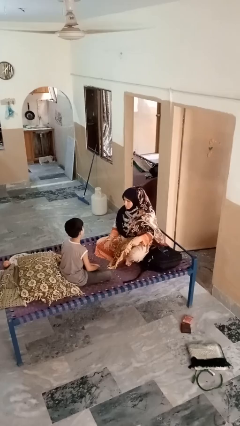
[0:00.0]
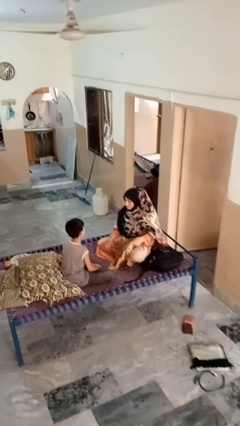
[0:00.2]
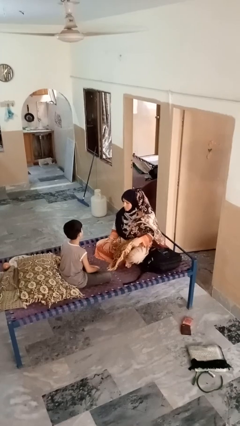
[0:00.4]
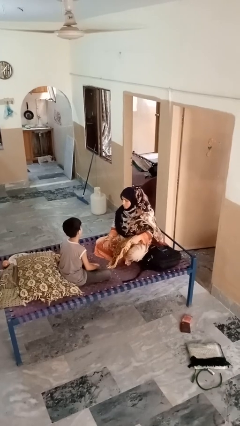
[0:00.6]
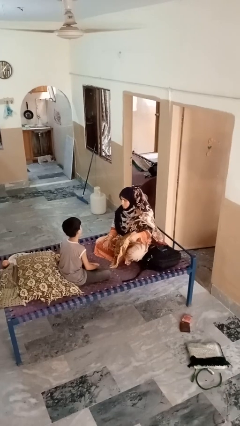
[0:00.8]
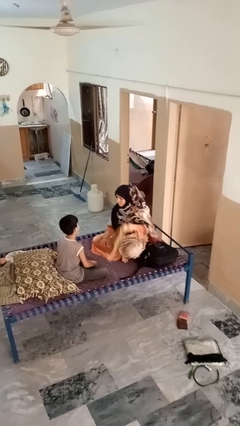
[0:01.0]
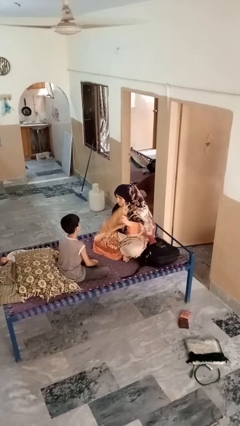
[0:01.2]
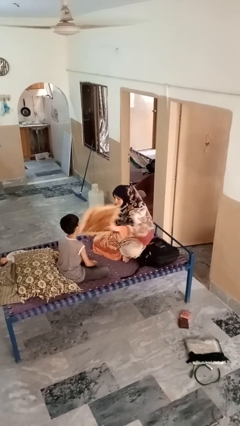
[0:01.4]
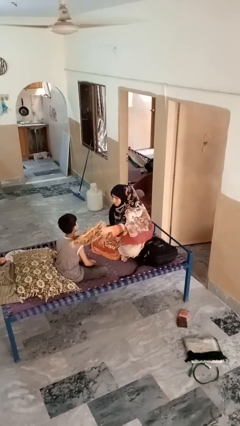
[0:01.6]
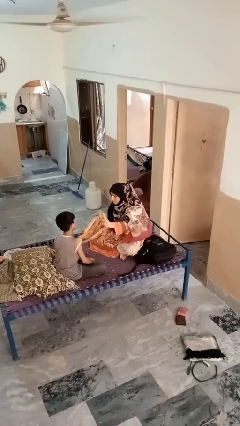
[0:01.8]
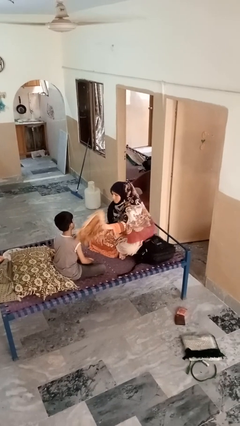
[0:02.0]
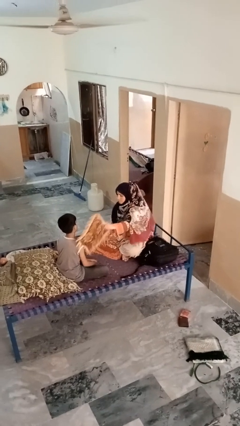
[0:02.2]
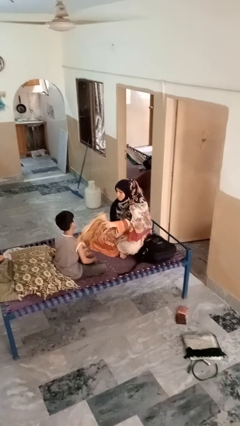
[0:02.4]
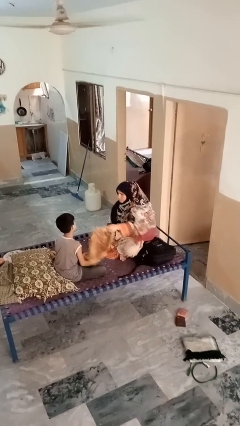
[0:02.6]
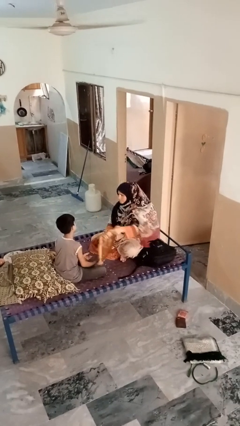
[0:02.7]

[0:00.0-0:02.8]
person hits person with pillow

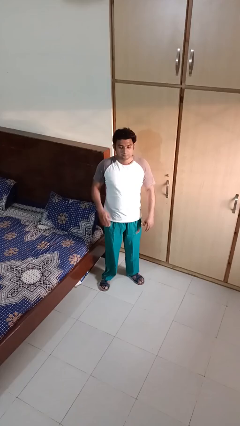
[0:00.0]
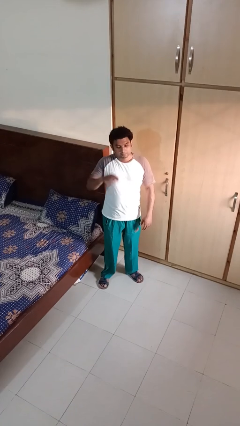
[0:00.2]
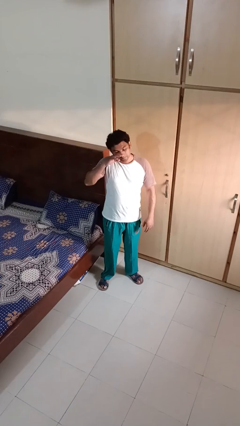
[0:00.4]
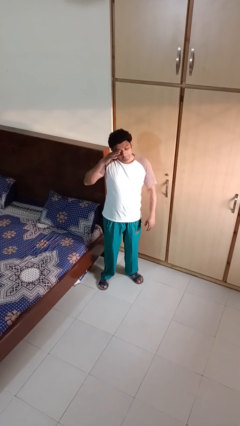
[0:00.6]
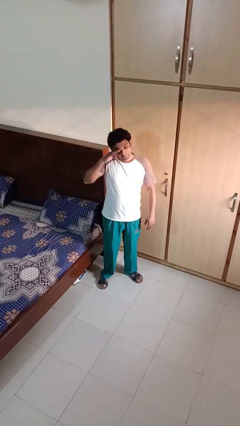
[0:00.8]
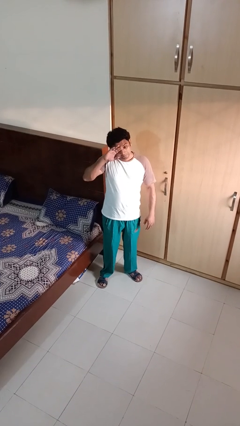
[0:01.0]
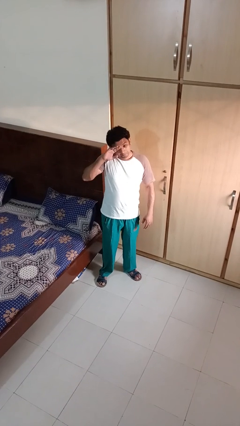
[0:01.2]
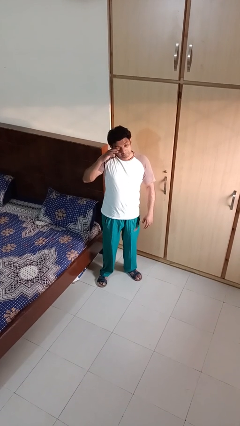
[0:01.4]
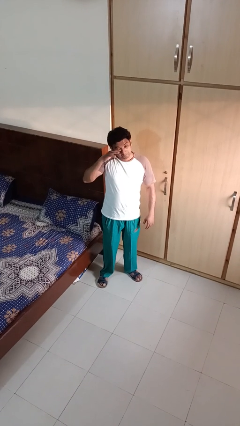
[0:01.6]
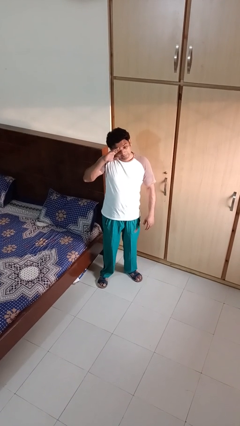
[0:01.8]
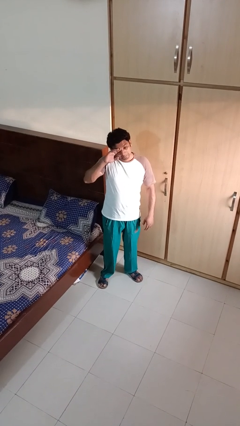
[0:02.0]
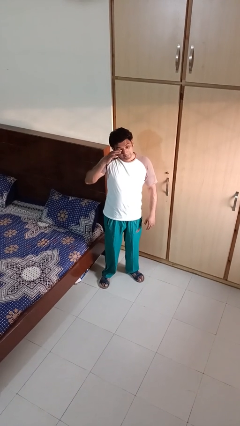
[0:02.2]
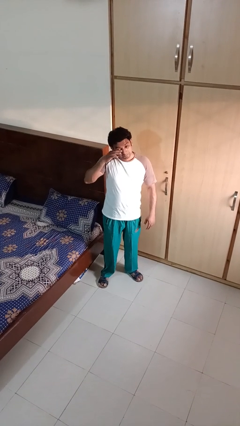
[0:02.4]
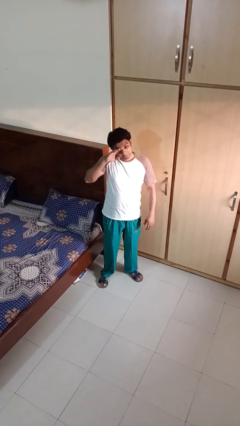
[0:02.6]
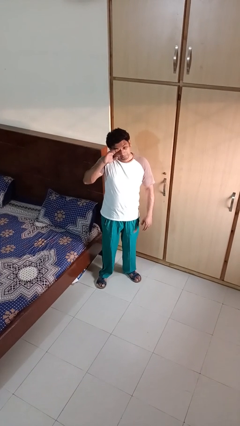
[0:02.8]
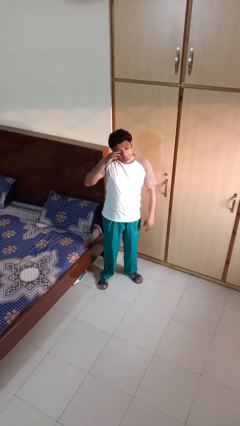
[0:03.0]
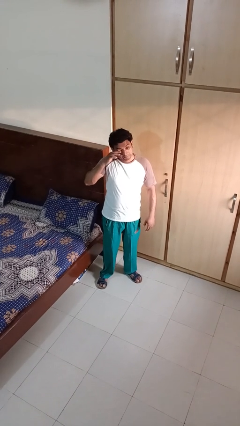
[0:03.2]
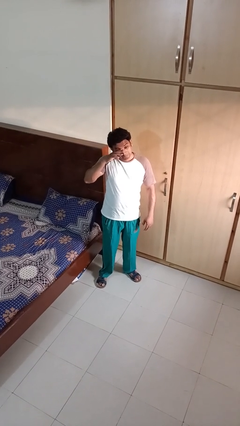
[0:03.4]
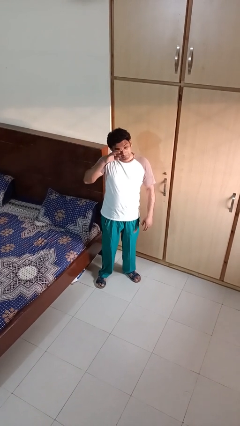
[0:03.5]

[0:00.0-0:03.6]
person rubs eyes

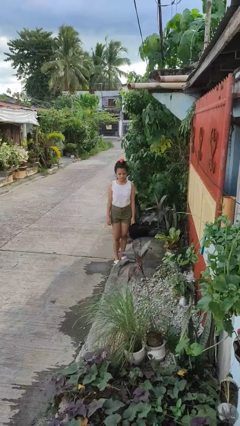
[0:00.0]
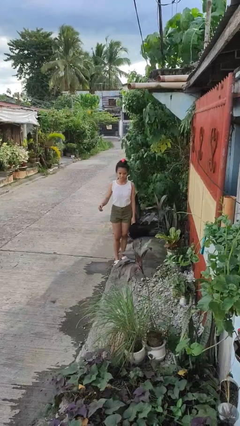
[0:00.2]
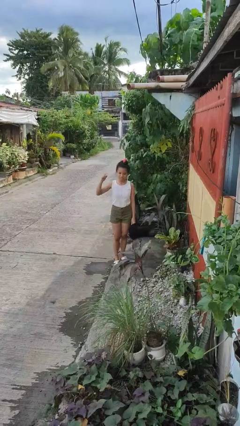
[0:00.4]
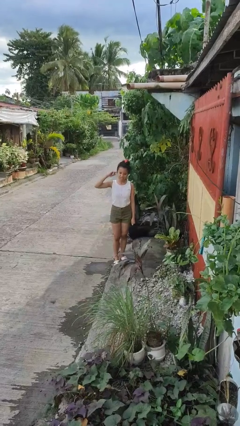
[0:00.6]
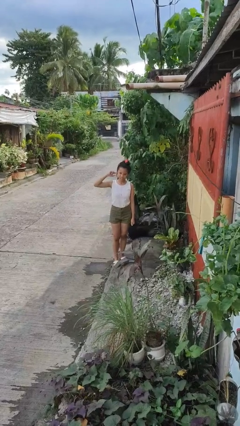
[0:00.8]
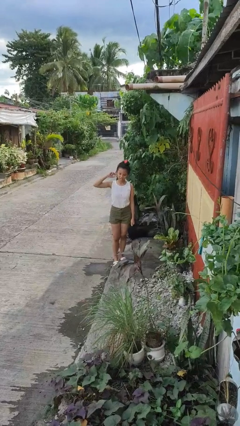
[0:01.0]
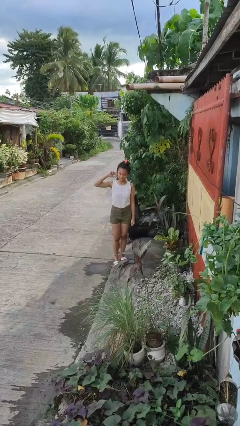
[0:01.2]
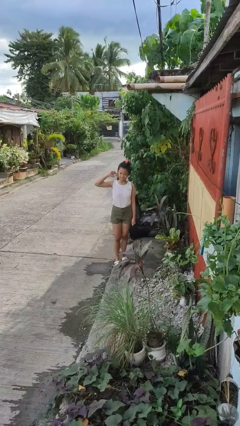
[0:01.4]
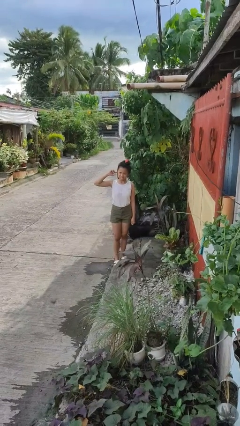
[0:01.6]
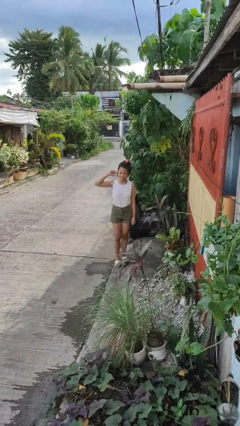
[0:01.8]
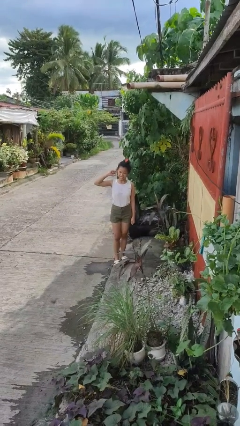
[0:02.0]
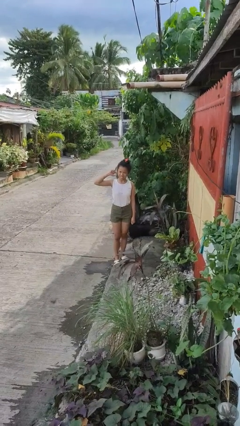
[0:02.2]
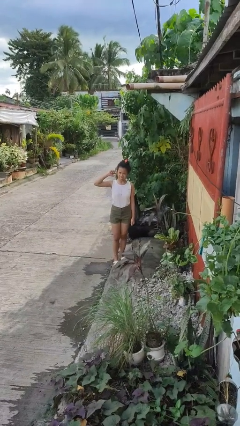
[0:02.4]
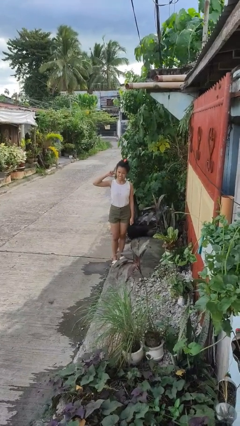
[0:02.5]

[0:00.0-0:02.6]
person touches earlobe

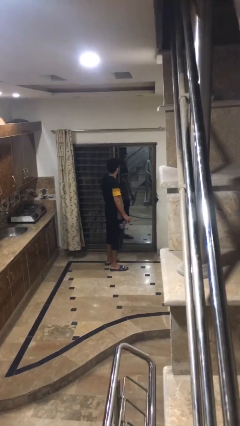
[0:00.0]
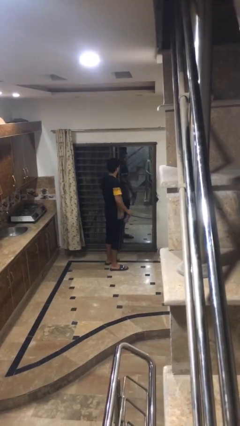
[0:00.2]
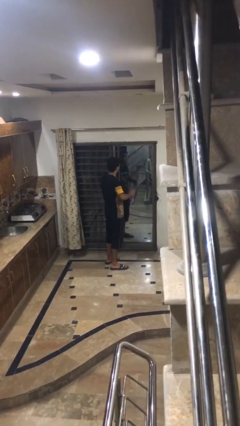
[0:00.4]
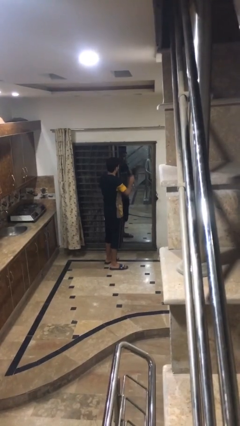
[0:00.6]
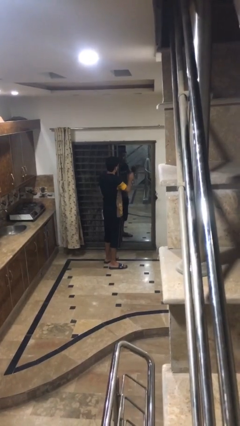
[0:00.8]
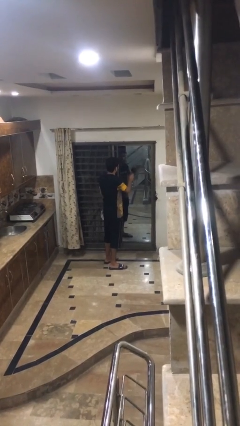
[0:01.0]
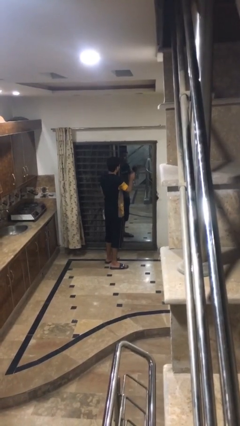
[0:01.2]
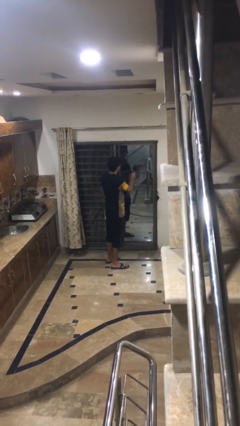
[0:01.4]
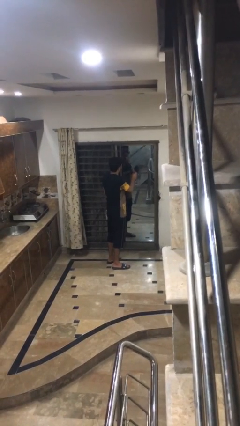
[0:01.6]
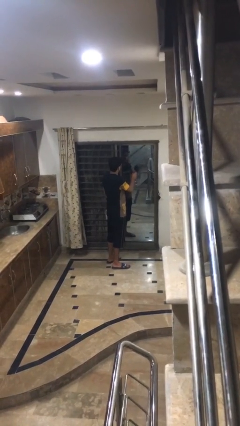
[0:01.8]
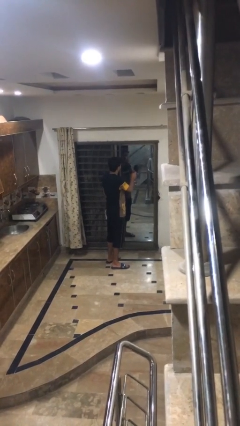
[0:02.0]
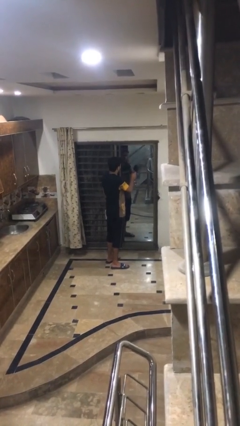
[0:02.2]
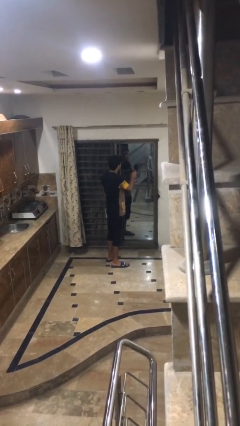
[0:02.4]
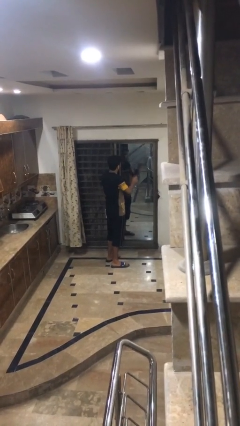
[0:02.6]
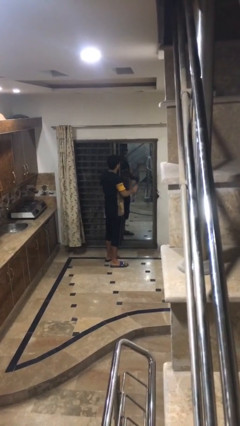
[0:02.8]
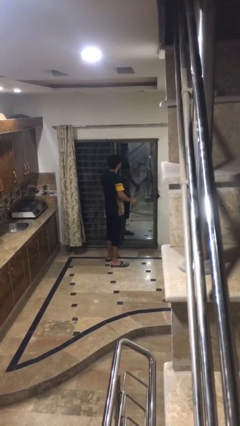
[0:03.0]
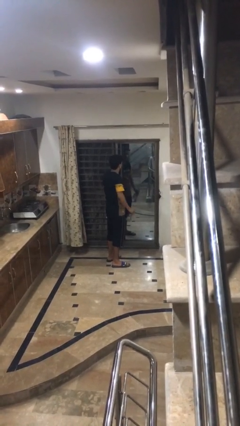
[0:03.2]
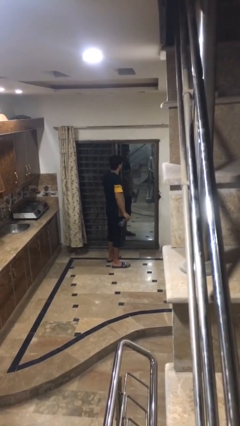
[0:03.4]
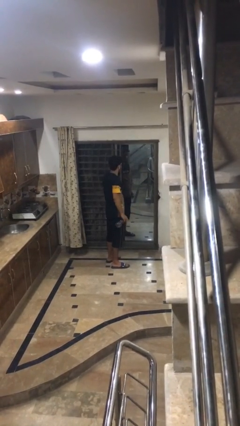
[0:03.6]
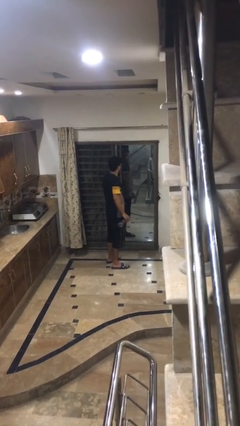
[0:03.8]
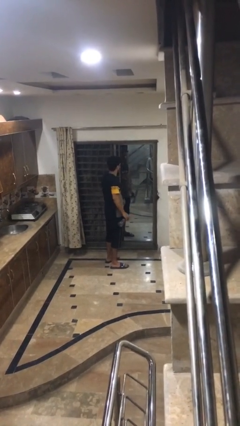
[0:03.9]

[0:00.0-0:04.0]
person sprays from bottle

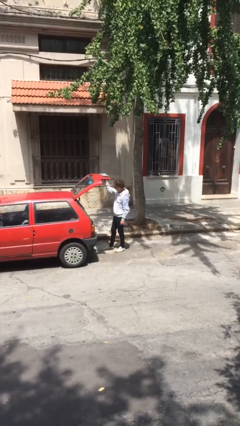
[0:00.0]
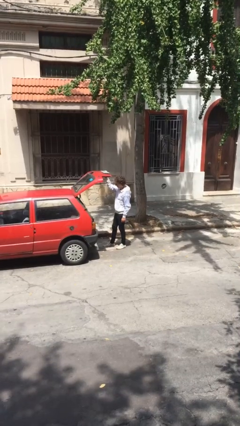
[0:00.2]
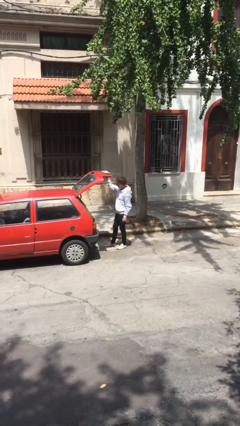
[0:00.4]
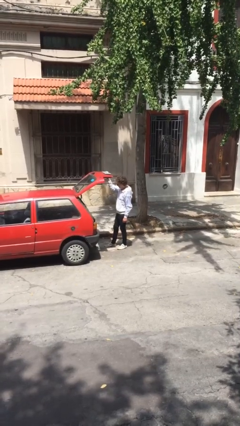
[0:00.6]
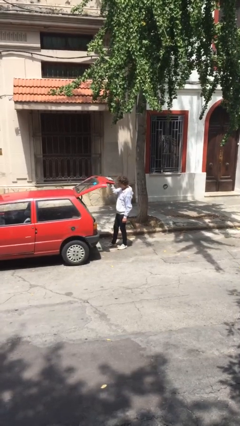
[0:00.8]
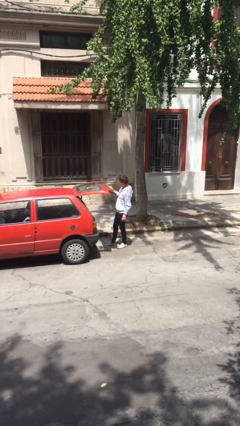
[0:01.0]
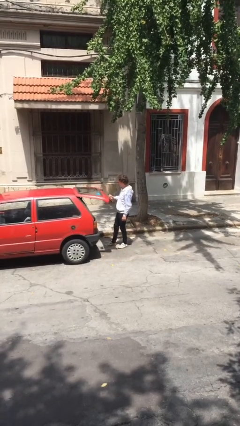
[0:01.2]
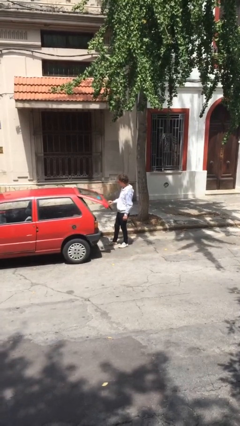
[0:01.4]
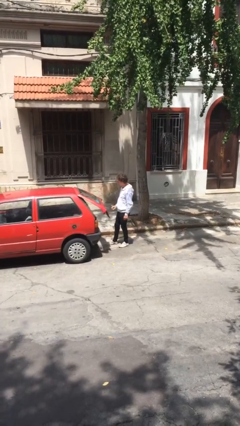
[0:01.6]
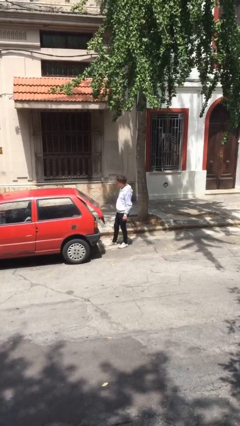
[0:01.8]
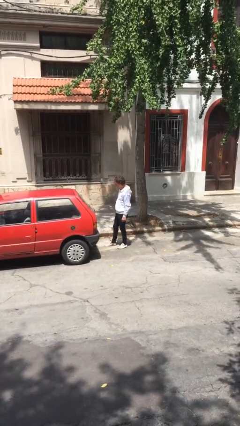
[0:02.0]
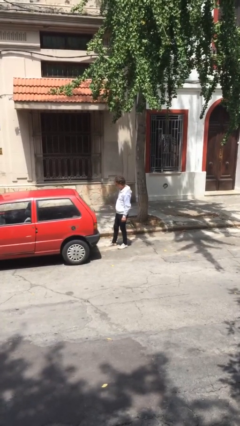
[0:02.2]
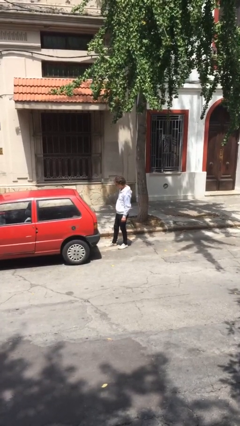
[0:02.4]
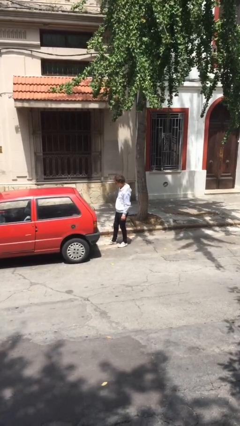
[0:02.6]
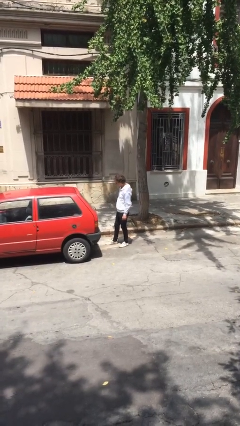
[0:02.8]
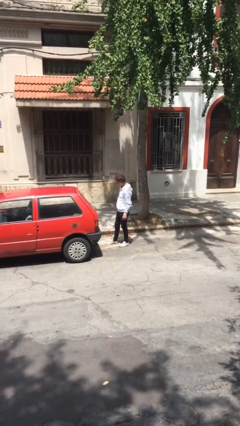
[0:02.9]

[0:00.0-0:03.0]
person closes car trunk

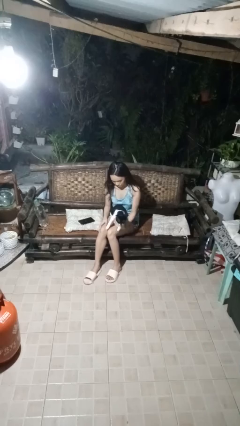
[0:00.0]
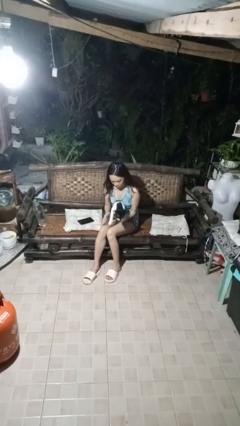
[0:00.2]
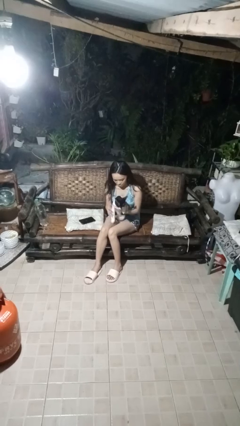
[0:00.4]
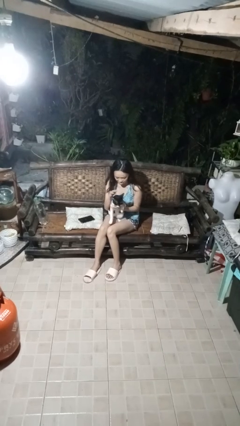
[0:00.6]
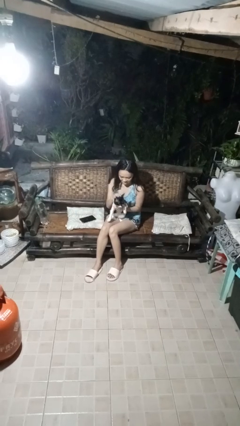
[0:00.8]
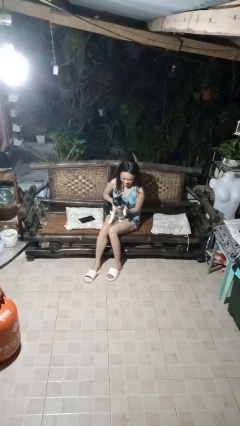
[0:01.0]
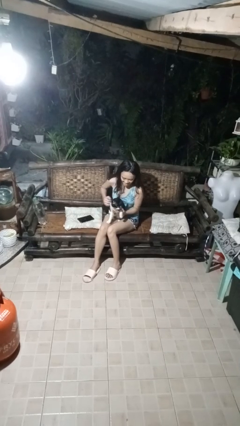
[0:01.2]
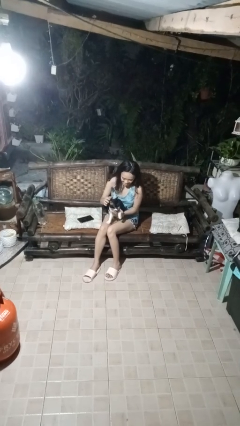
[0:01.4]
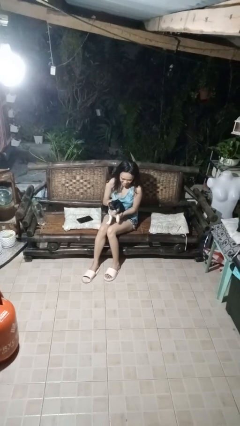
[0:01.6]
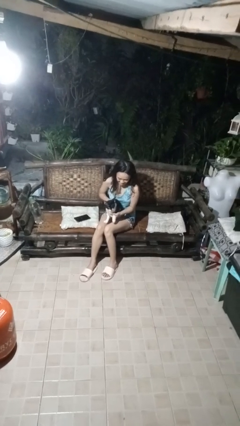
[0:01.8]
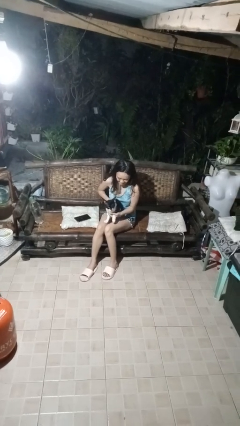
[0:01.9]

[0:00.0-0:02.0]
person pets cat
